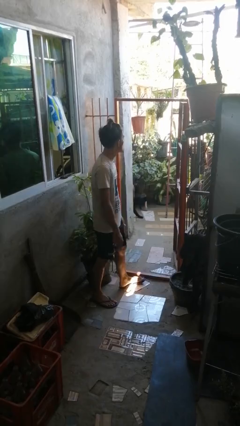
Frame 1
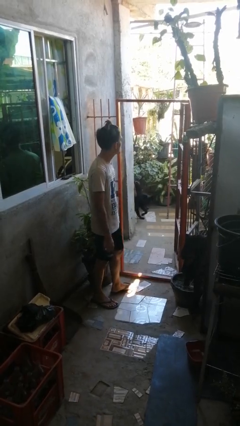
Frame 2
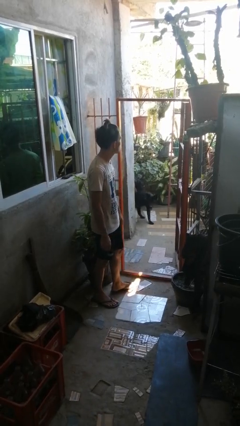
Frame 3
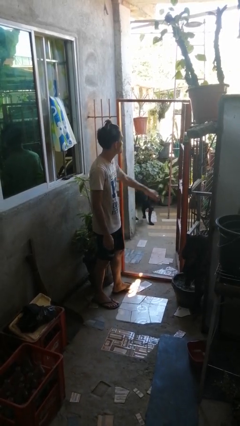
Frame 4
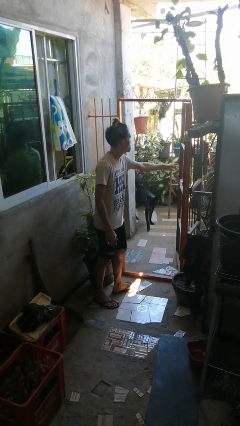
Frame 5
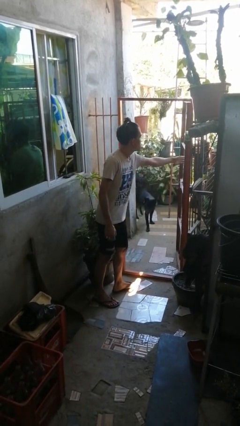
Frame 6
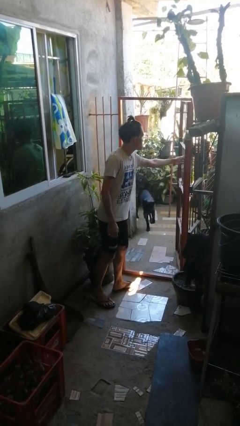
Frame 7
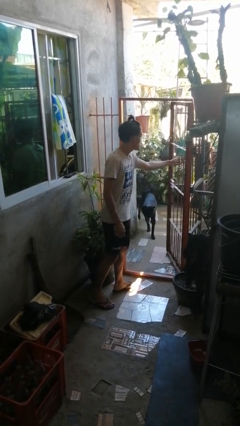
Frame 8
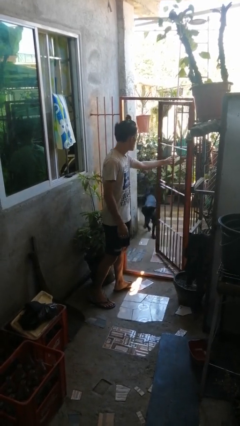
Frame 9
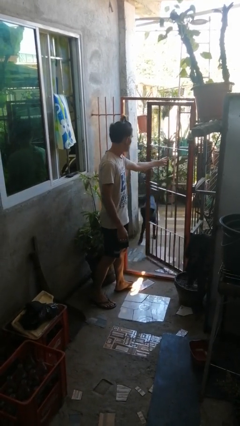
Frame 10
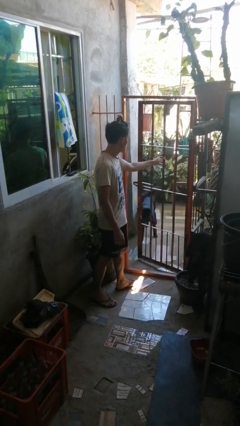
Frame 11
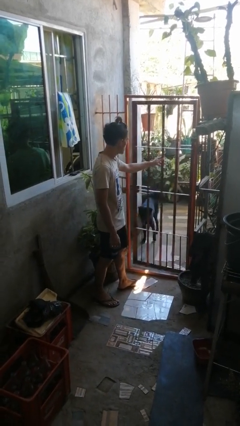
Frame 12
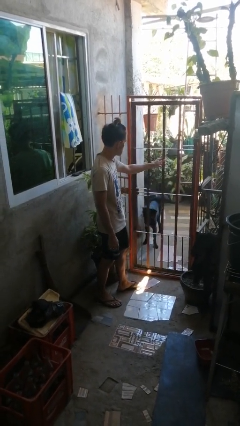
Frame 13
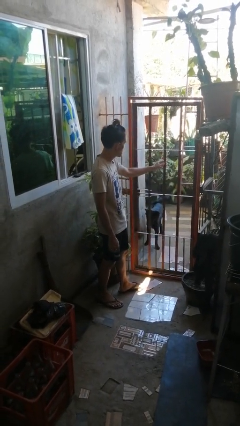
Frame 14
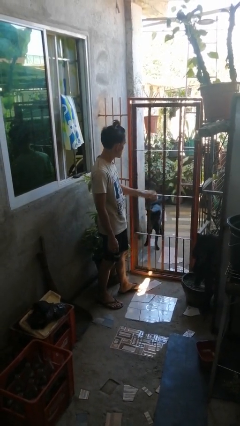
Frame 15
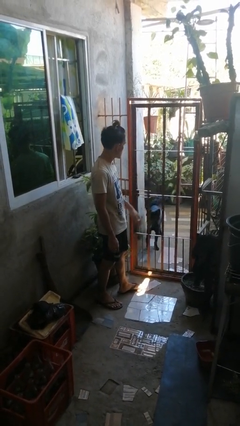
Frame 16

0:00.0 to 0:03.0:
person closes gate

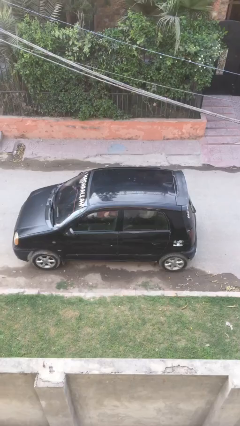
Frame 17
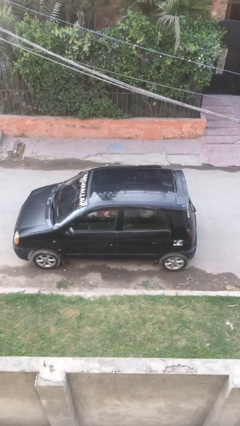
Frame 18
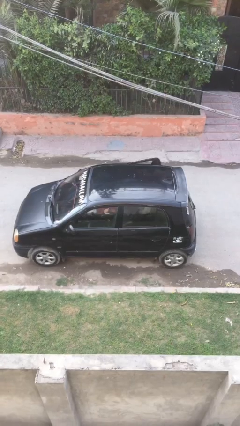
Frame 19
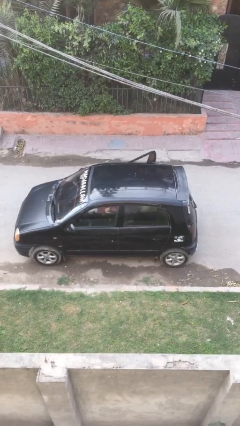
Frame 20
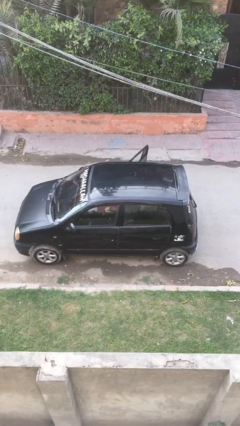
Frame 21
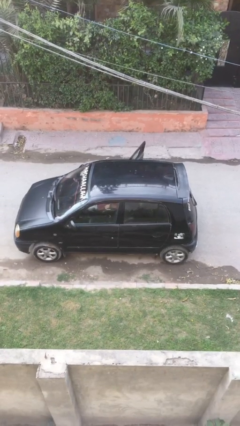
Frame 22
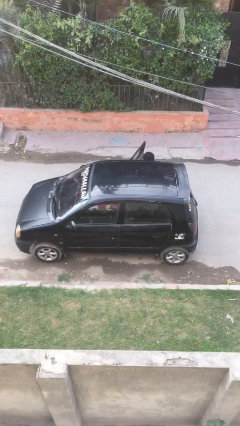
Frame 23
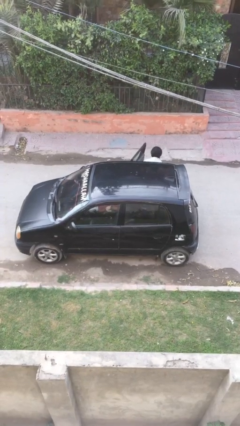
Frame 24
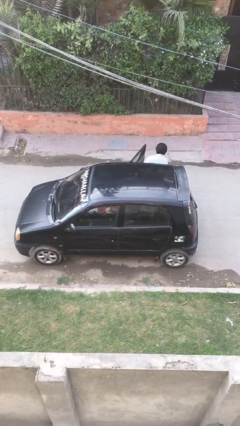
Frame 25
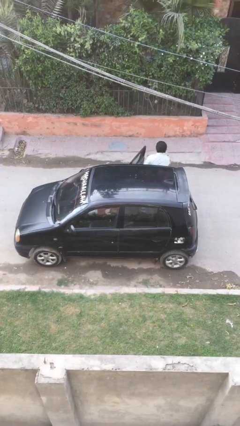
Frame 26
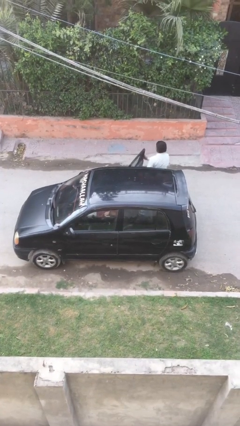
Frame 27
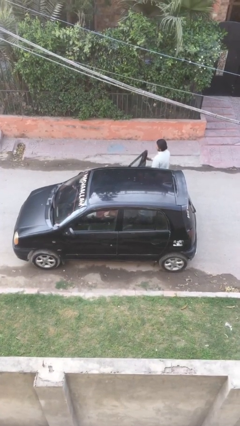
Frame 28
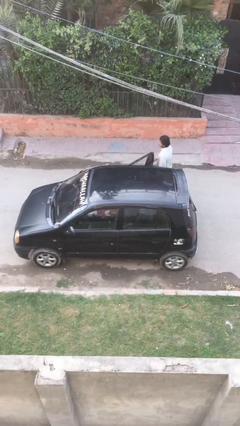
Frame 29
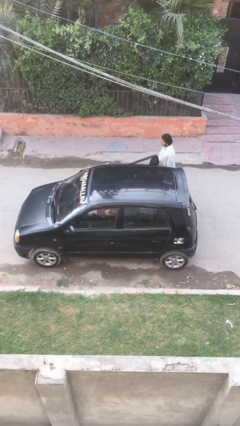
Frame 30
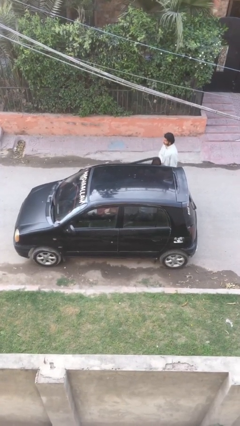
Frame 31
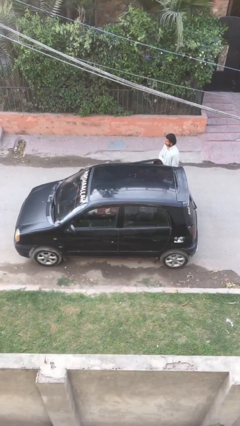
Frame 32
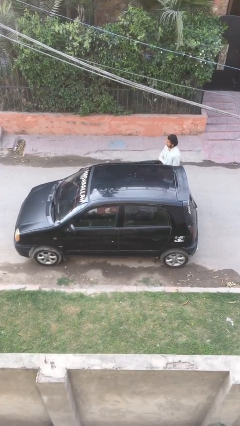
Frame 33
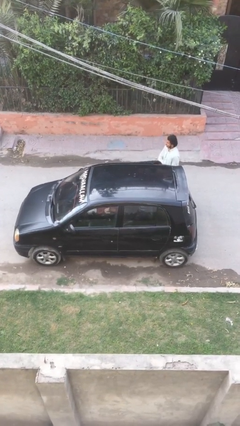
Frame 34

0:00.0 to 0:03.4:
car drops off person

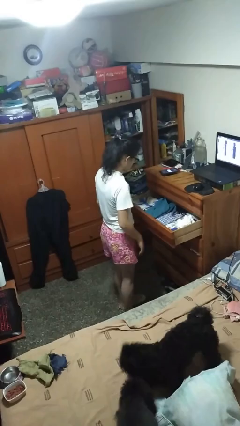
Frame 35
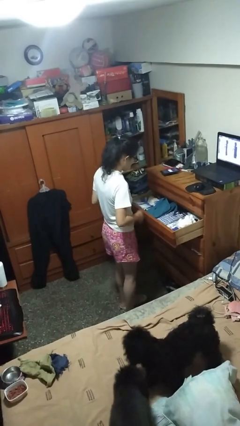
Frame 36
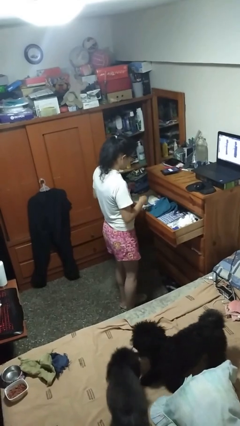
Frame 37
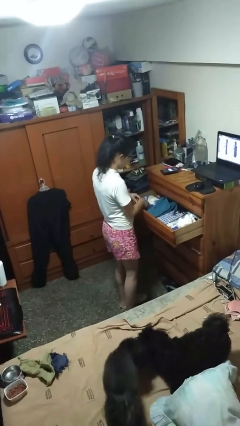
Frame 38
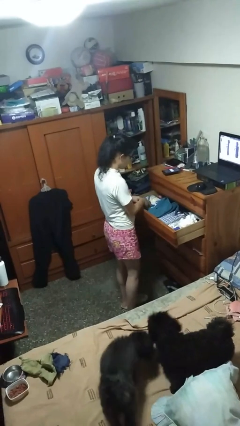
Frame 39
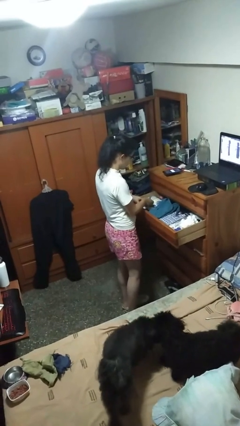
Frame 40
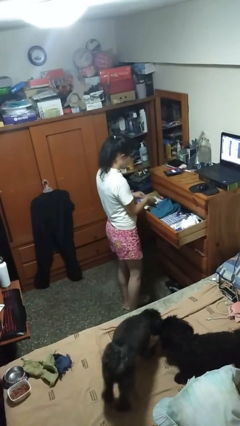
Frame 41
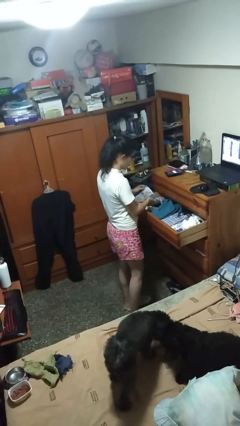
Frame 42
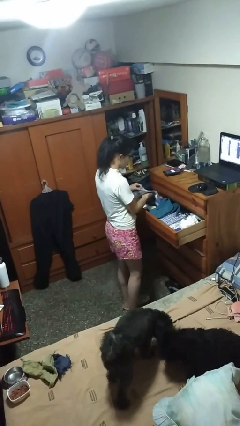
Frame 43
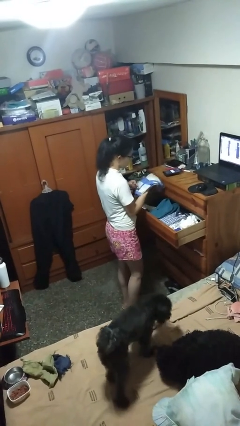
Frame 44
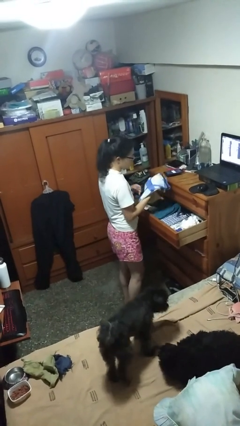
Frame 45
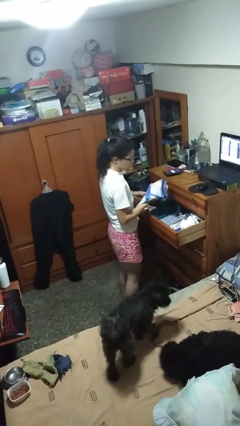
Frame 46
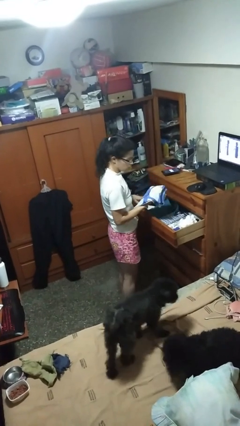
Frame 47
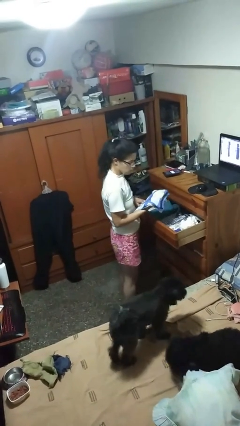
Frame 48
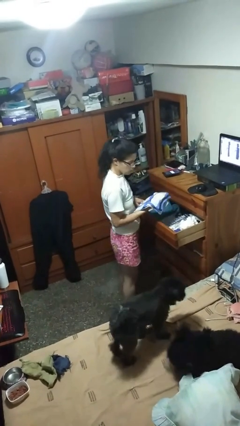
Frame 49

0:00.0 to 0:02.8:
person takes clothes from dresser

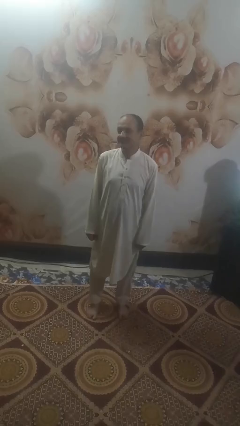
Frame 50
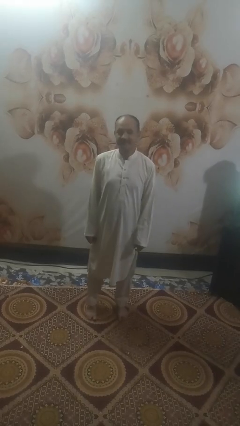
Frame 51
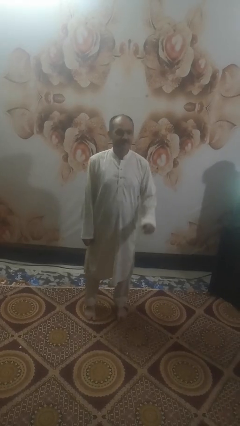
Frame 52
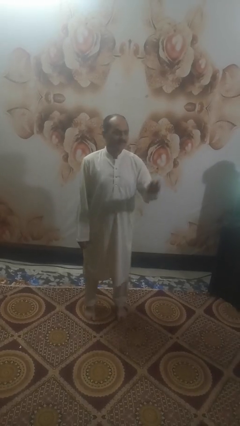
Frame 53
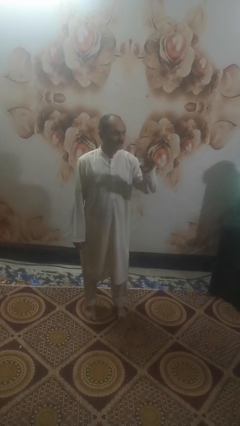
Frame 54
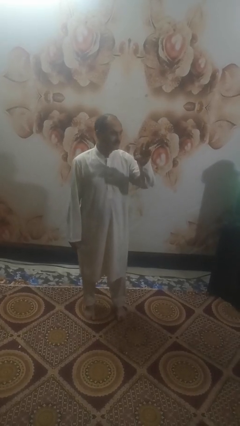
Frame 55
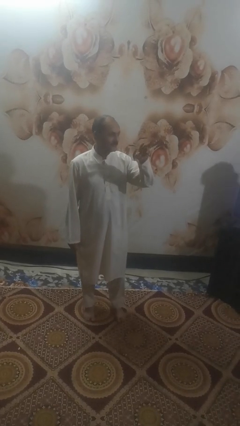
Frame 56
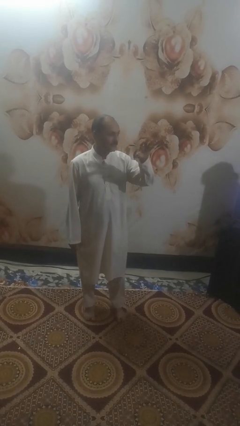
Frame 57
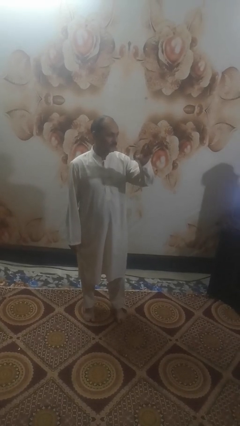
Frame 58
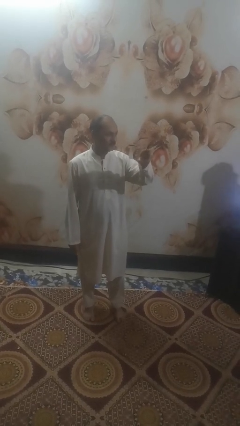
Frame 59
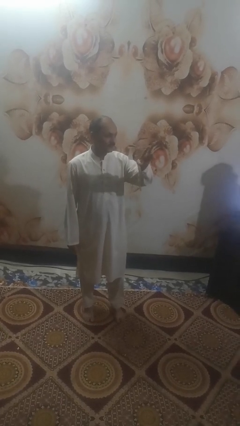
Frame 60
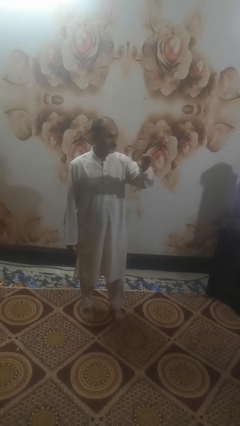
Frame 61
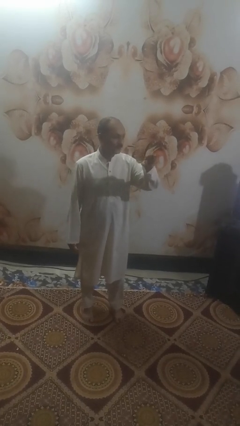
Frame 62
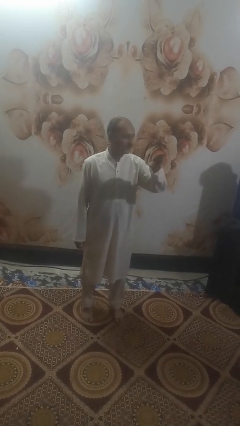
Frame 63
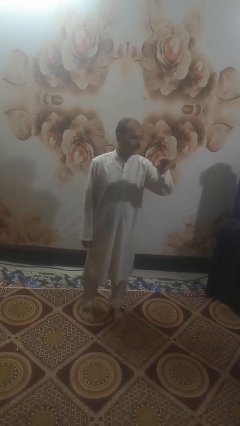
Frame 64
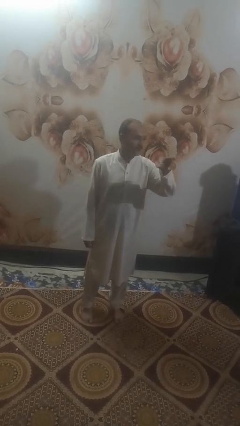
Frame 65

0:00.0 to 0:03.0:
person gestures come here

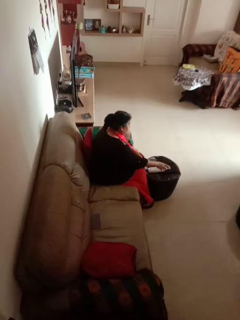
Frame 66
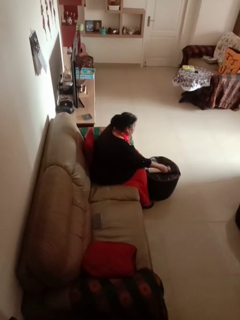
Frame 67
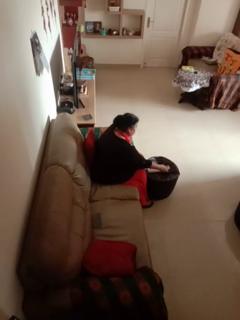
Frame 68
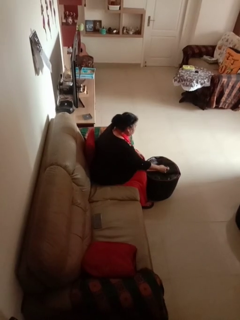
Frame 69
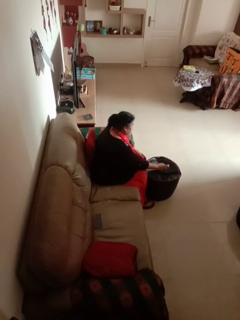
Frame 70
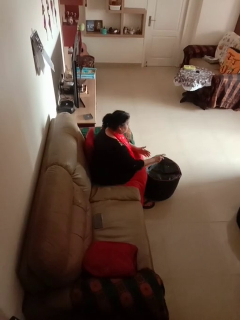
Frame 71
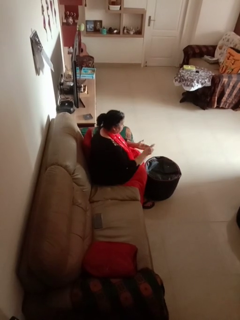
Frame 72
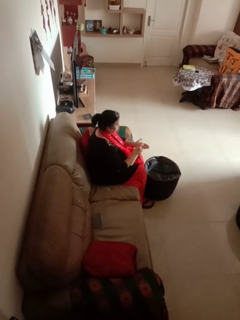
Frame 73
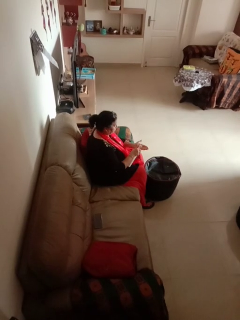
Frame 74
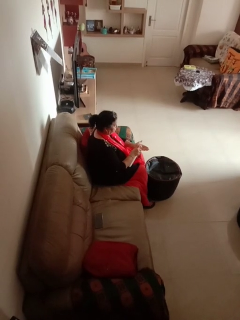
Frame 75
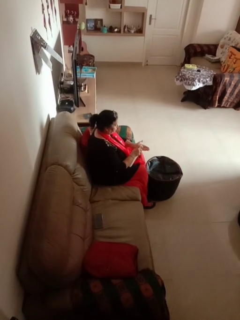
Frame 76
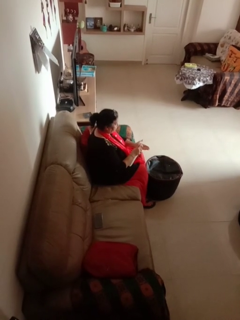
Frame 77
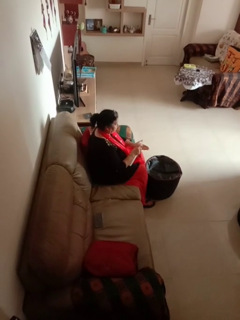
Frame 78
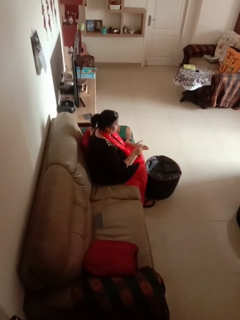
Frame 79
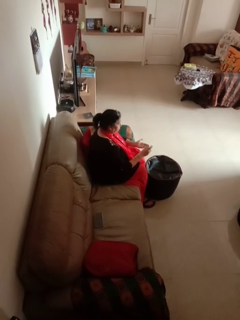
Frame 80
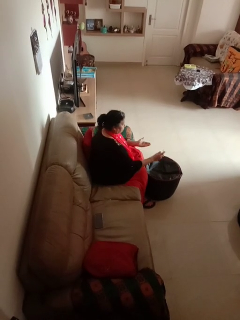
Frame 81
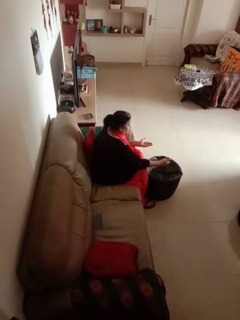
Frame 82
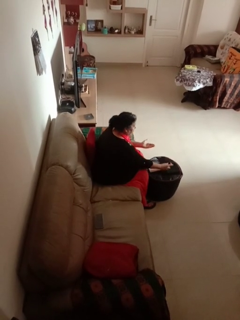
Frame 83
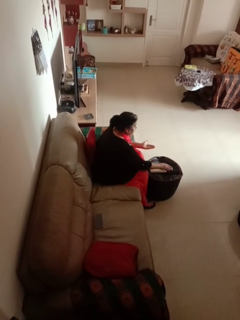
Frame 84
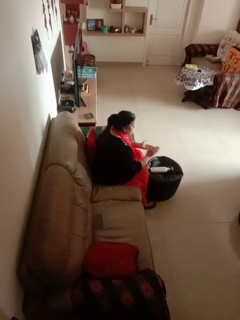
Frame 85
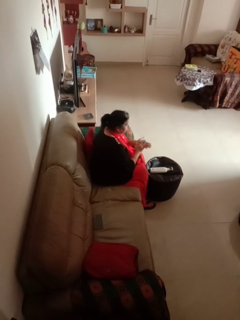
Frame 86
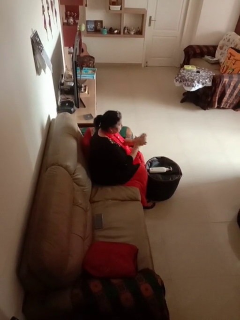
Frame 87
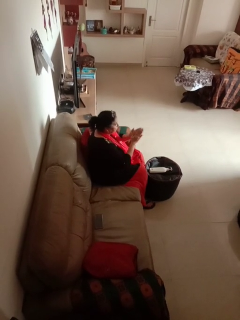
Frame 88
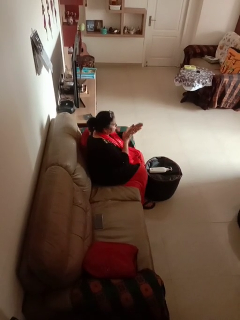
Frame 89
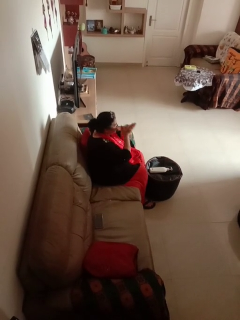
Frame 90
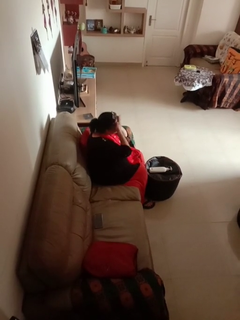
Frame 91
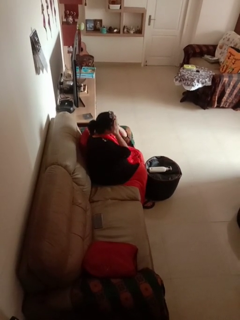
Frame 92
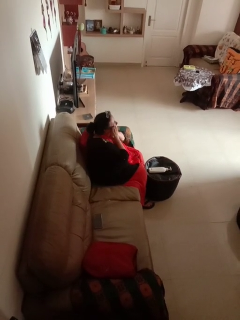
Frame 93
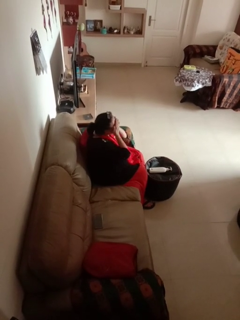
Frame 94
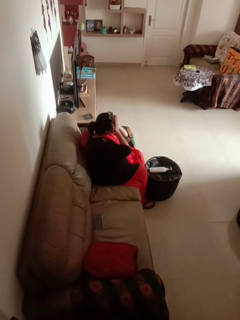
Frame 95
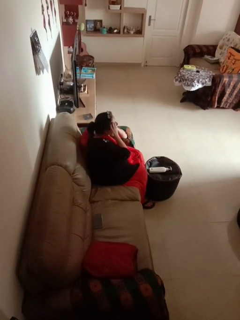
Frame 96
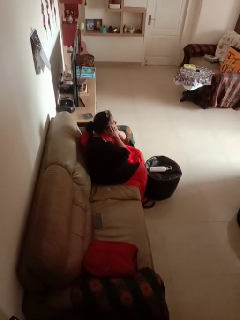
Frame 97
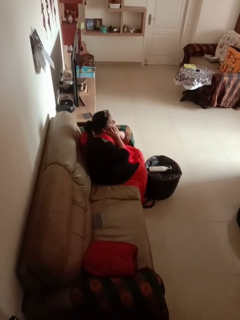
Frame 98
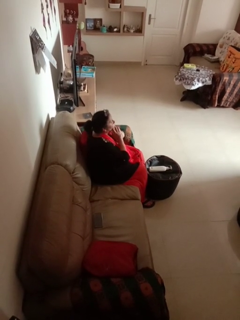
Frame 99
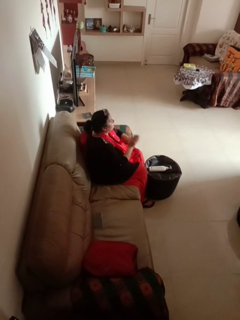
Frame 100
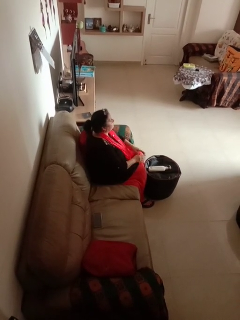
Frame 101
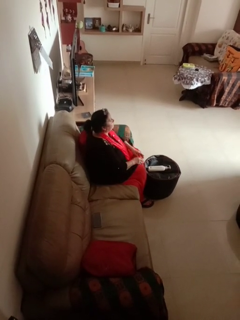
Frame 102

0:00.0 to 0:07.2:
person applies facial moisturizer
